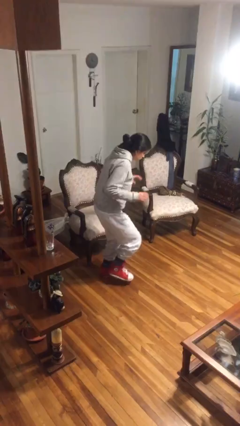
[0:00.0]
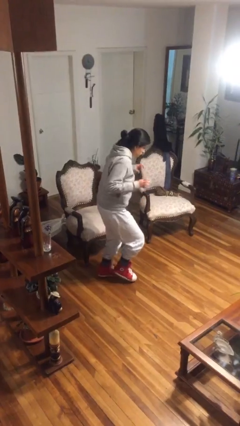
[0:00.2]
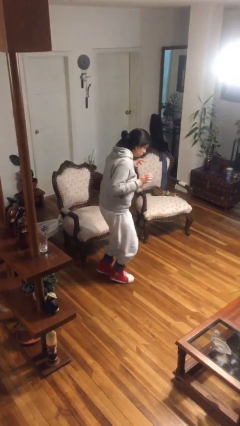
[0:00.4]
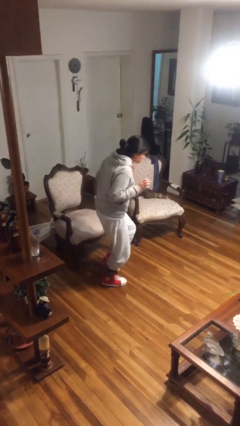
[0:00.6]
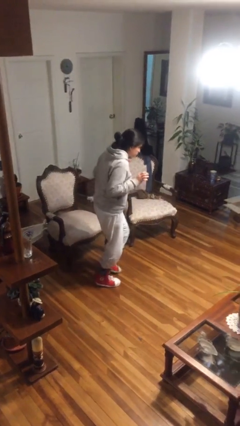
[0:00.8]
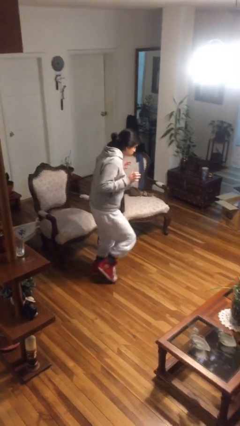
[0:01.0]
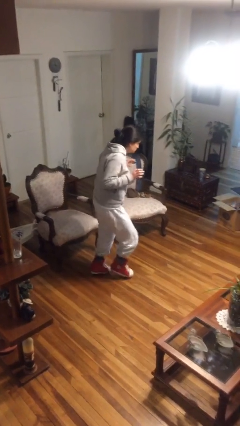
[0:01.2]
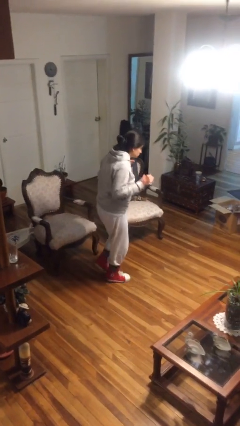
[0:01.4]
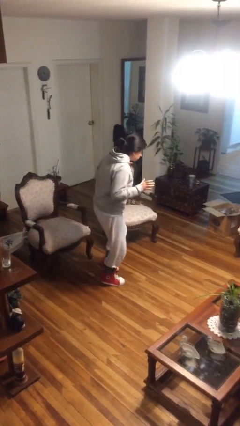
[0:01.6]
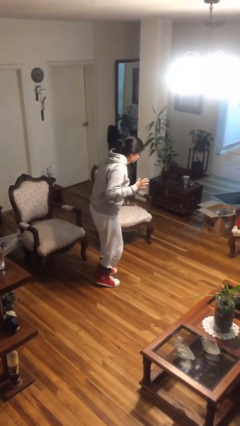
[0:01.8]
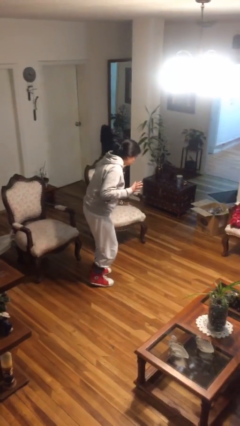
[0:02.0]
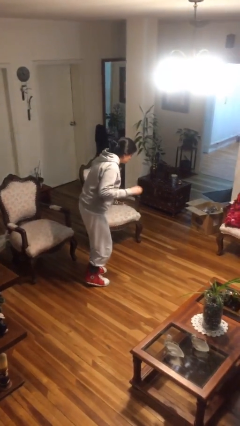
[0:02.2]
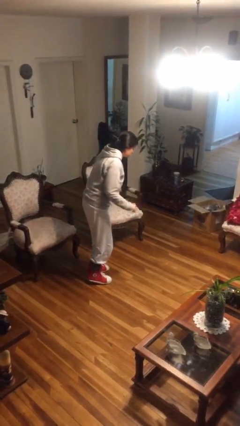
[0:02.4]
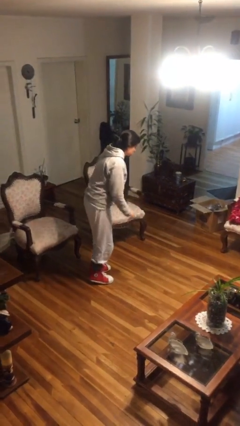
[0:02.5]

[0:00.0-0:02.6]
person walks tiptoe

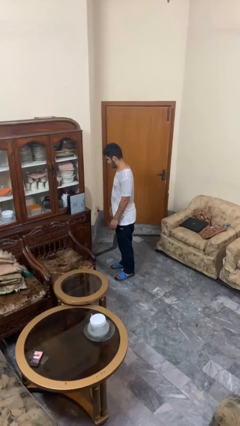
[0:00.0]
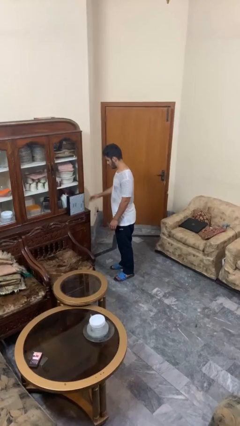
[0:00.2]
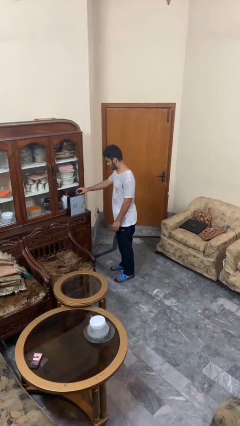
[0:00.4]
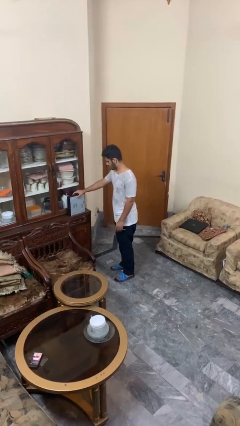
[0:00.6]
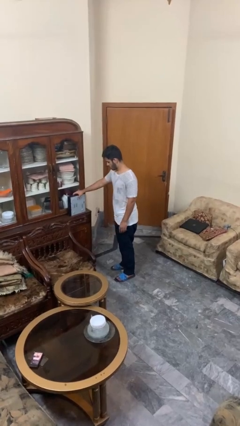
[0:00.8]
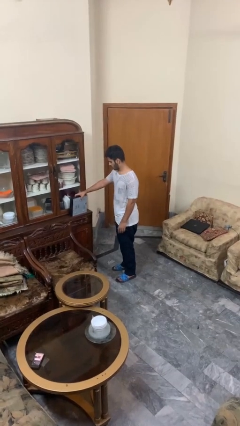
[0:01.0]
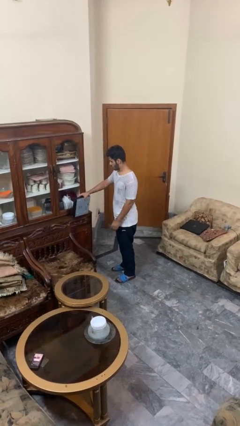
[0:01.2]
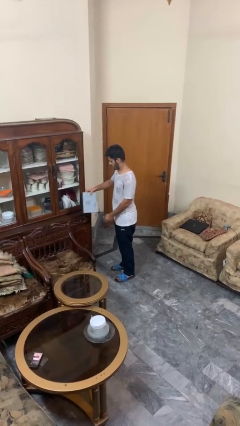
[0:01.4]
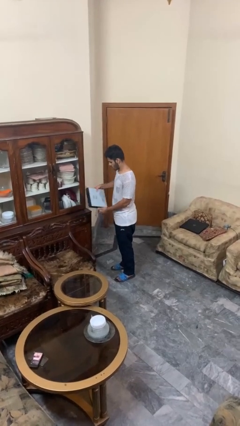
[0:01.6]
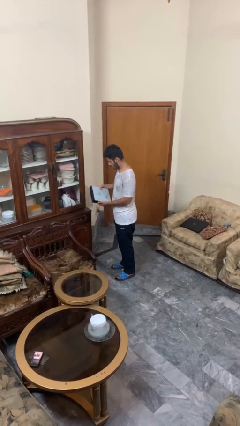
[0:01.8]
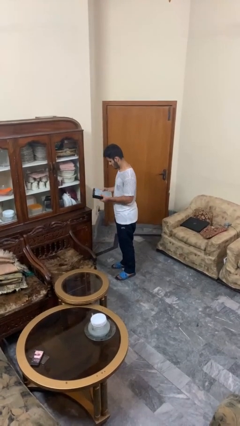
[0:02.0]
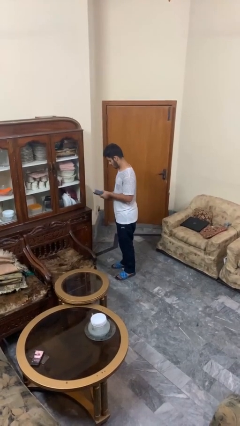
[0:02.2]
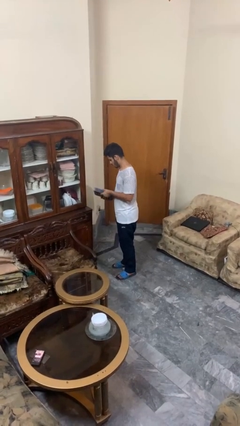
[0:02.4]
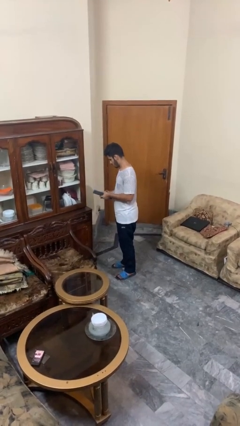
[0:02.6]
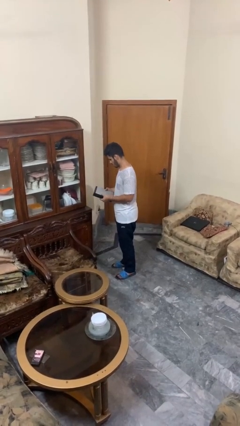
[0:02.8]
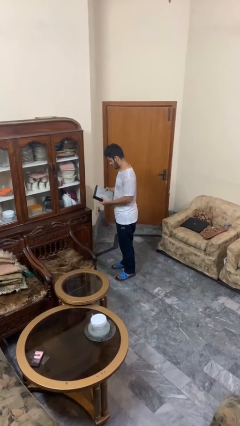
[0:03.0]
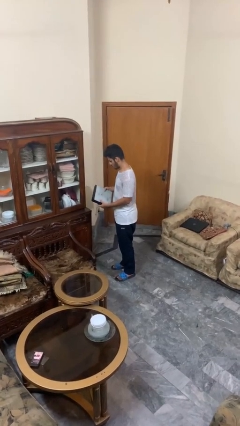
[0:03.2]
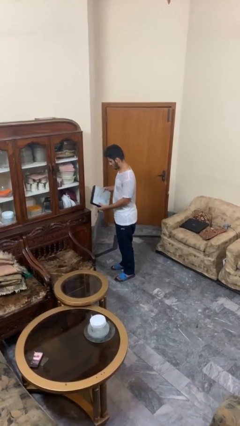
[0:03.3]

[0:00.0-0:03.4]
person picks up object from countertop

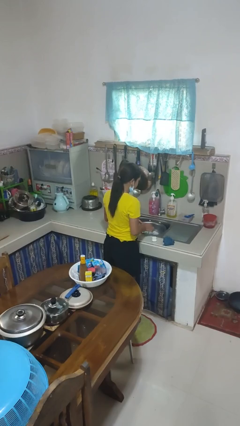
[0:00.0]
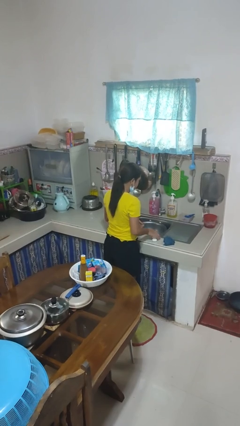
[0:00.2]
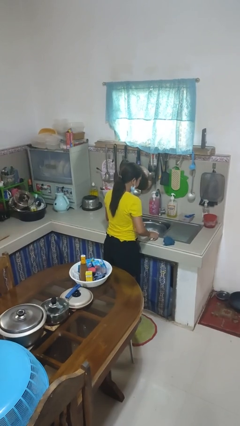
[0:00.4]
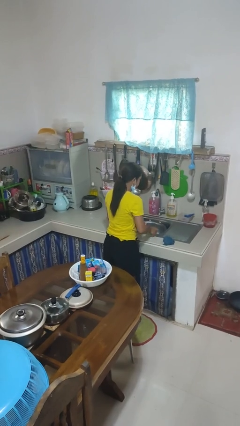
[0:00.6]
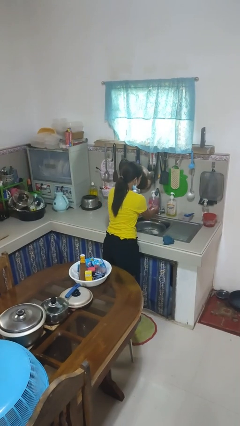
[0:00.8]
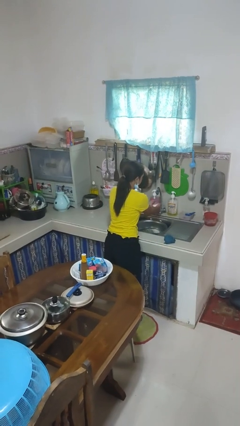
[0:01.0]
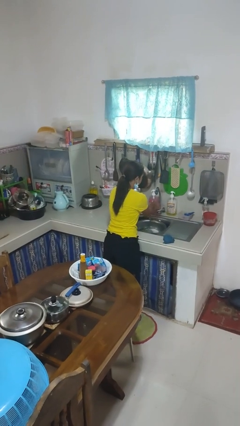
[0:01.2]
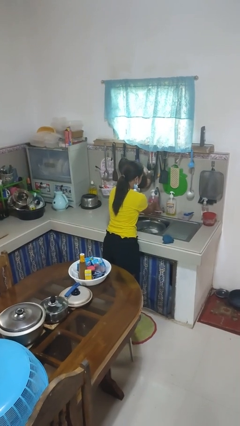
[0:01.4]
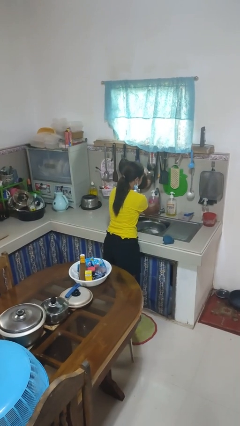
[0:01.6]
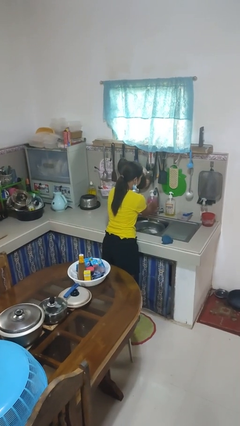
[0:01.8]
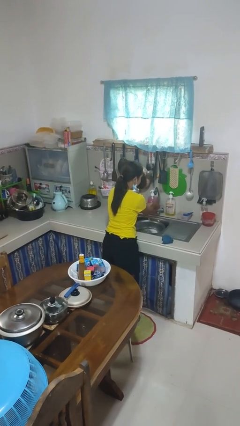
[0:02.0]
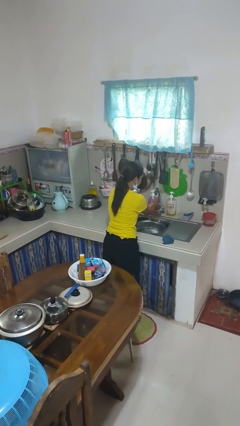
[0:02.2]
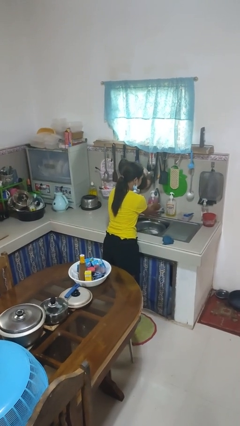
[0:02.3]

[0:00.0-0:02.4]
person washes hands

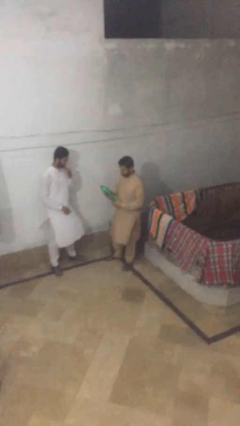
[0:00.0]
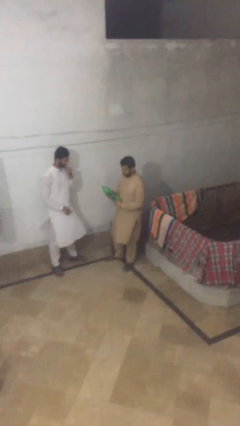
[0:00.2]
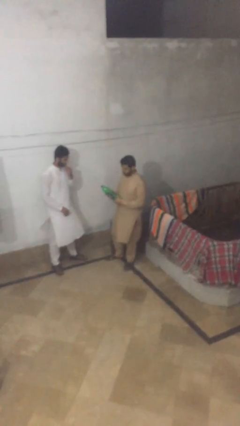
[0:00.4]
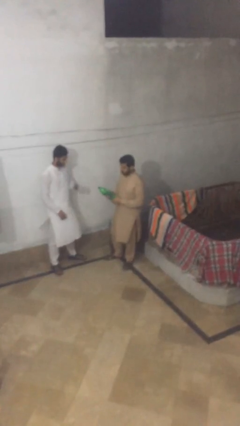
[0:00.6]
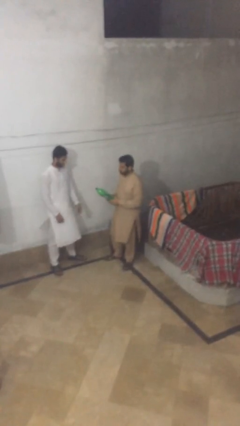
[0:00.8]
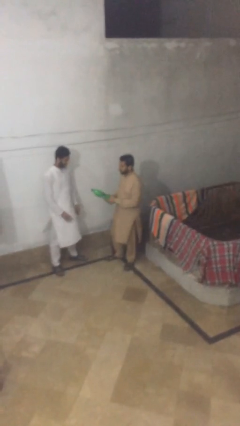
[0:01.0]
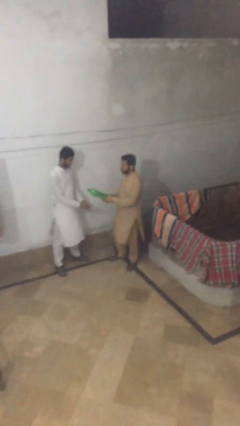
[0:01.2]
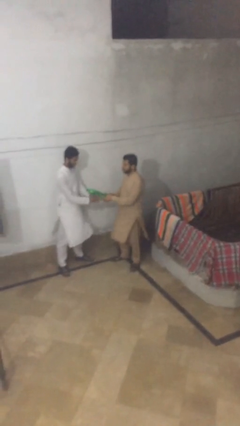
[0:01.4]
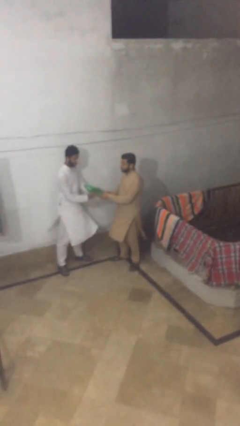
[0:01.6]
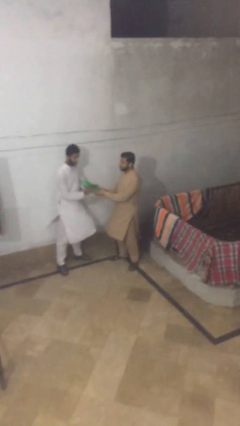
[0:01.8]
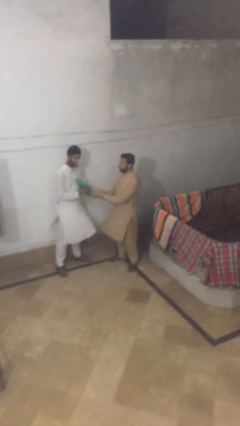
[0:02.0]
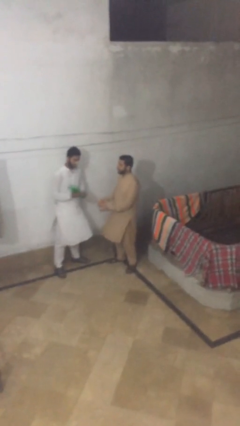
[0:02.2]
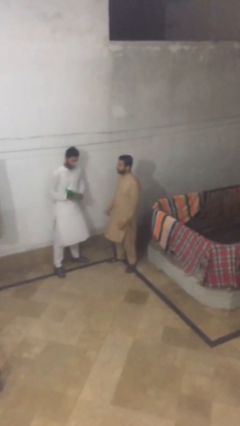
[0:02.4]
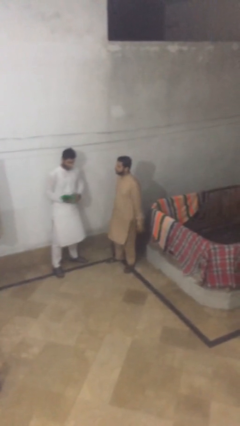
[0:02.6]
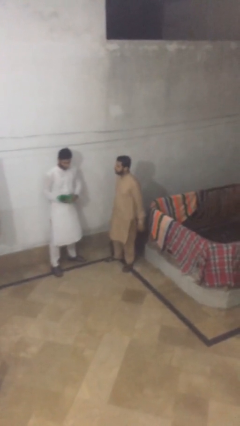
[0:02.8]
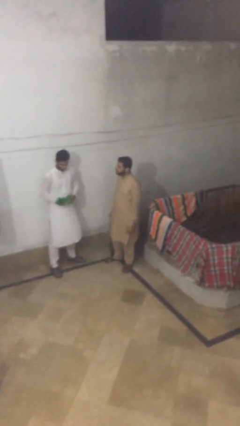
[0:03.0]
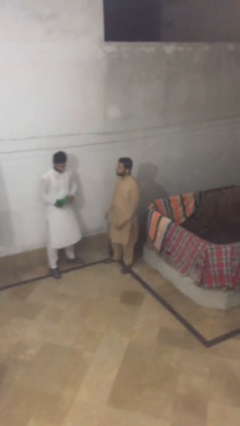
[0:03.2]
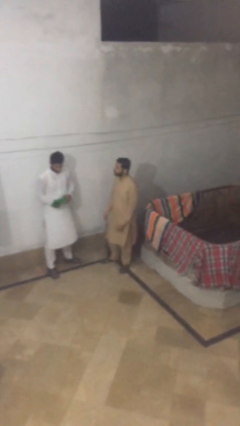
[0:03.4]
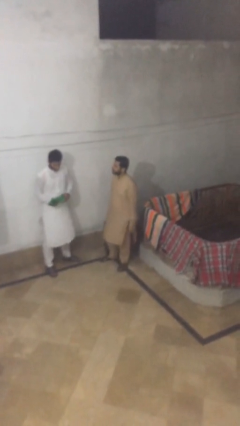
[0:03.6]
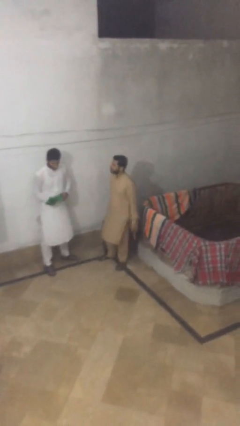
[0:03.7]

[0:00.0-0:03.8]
person transfers object to person

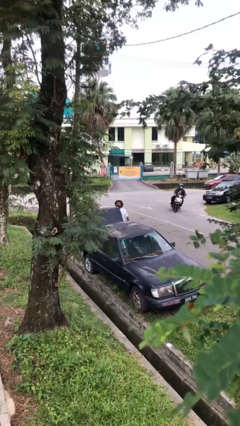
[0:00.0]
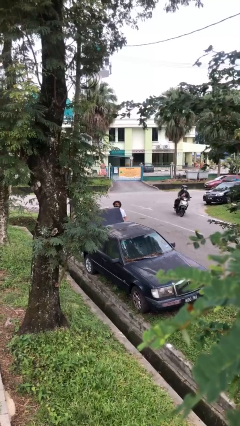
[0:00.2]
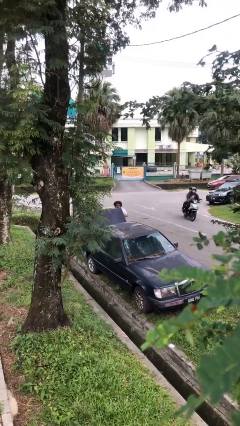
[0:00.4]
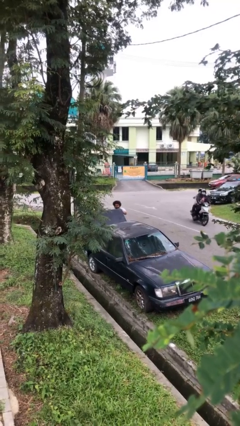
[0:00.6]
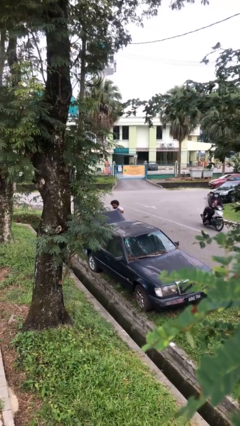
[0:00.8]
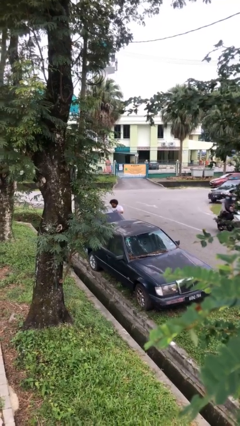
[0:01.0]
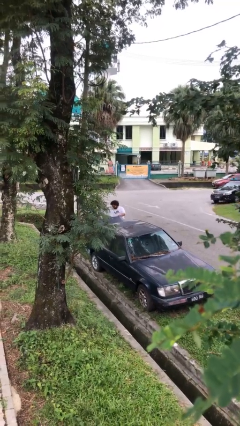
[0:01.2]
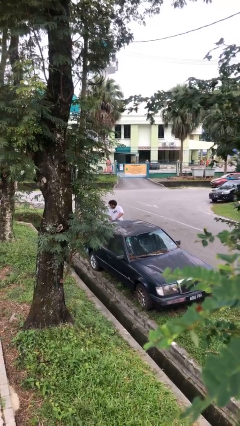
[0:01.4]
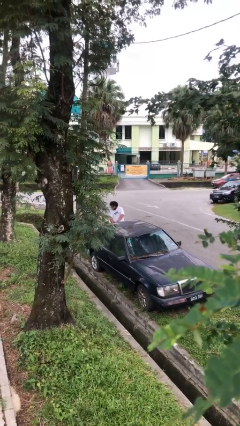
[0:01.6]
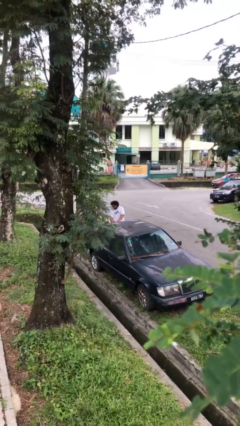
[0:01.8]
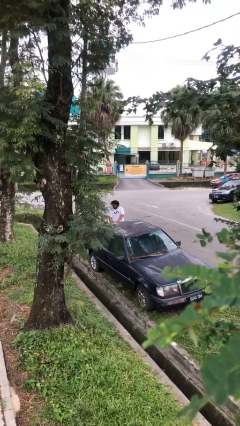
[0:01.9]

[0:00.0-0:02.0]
person closes car trunk

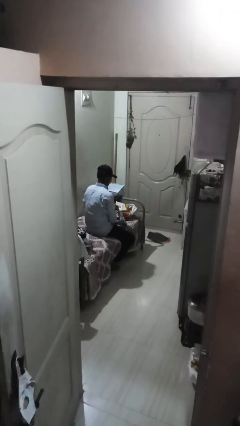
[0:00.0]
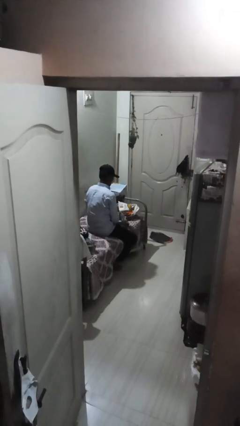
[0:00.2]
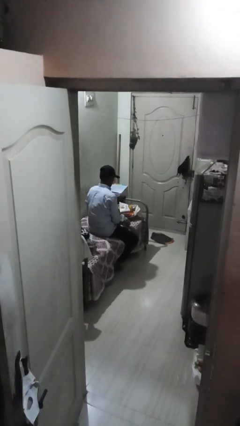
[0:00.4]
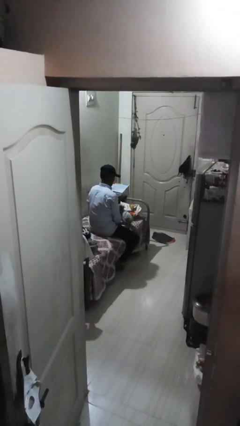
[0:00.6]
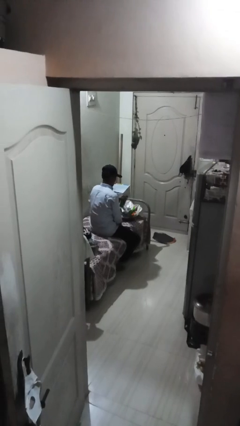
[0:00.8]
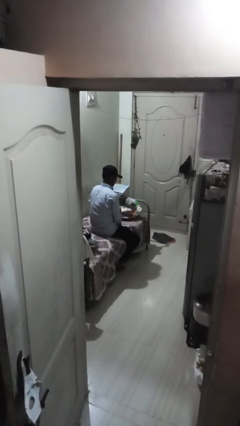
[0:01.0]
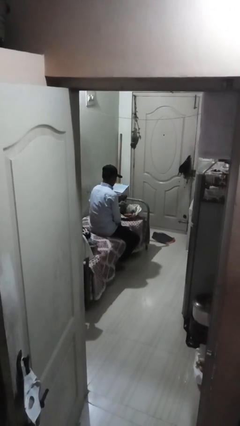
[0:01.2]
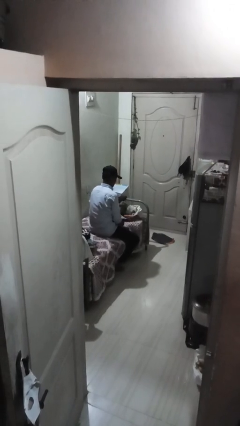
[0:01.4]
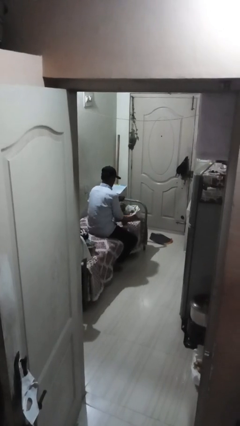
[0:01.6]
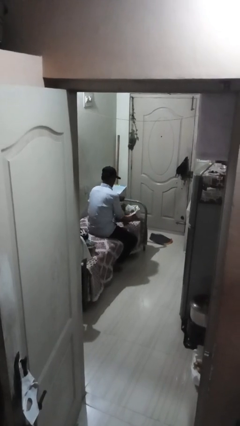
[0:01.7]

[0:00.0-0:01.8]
person puts object into bag

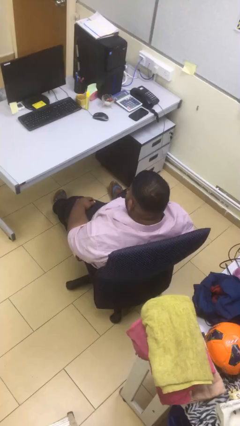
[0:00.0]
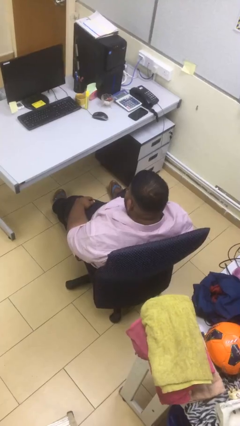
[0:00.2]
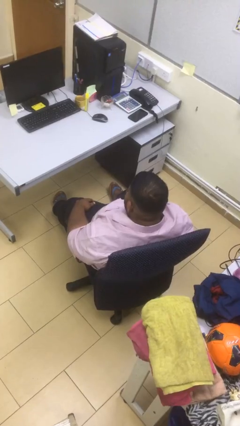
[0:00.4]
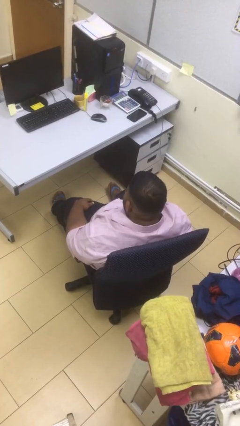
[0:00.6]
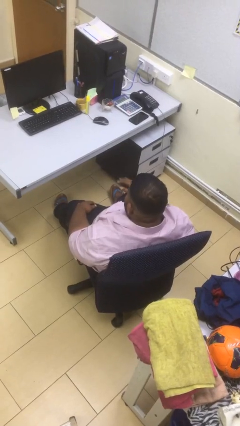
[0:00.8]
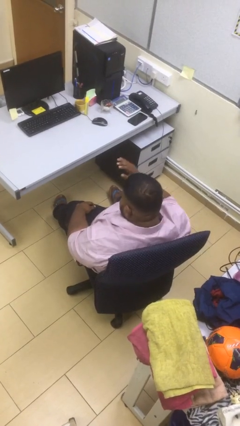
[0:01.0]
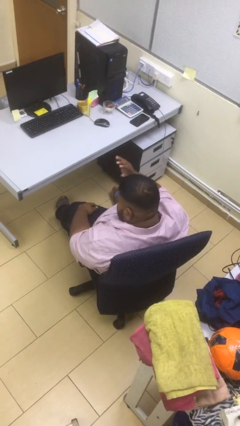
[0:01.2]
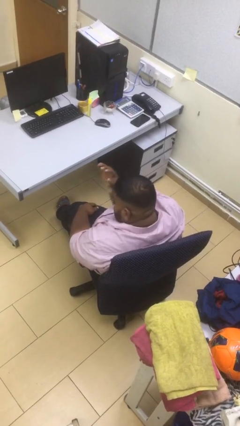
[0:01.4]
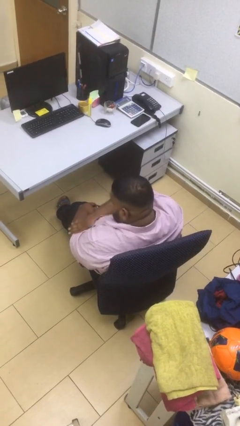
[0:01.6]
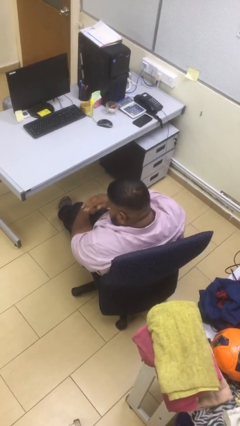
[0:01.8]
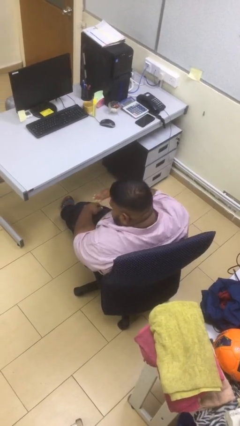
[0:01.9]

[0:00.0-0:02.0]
person swats bug
